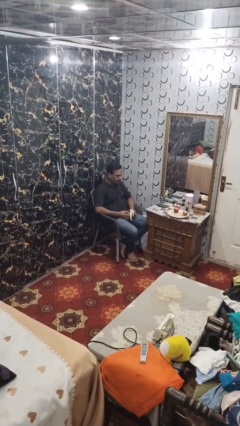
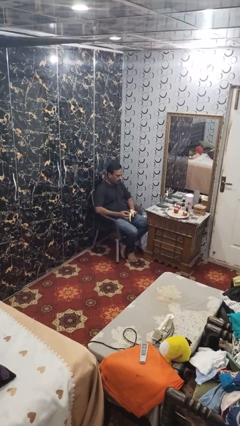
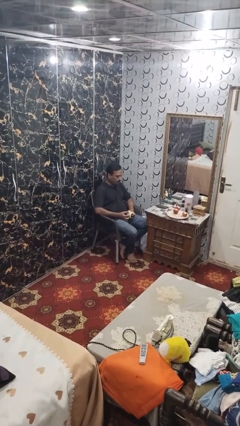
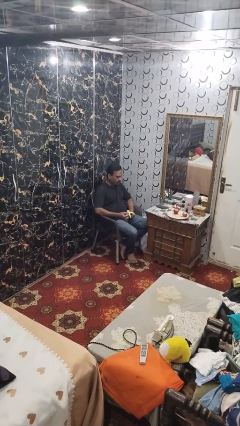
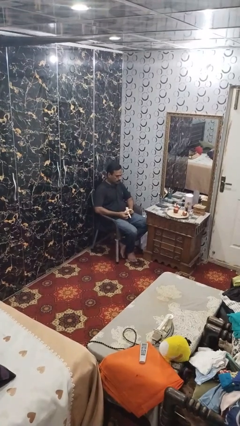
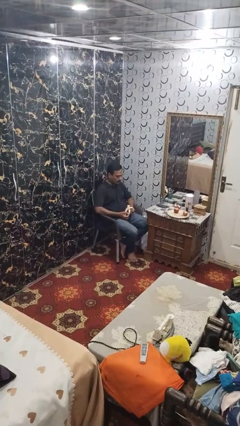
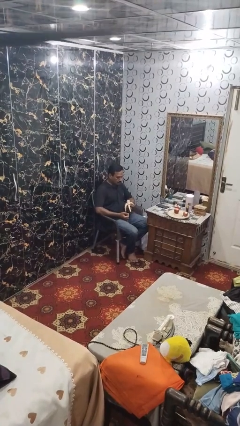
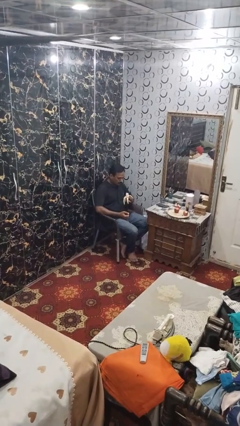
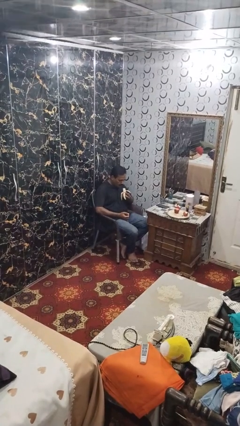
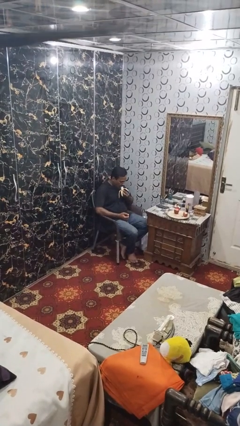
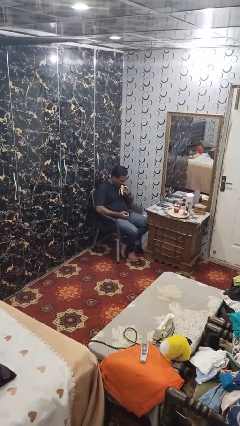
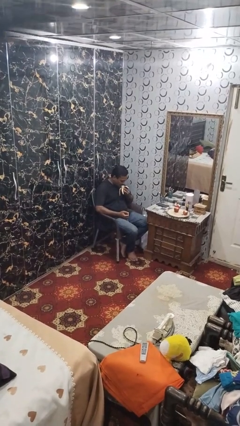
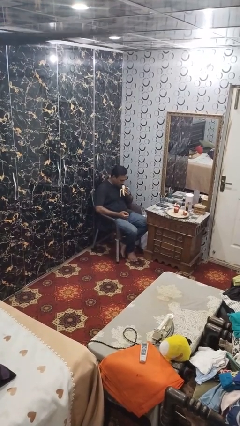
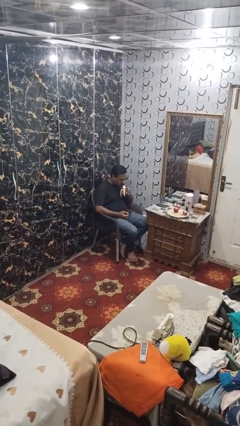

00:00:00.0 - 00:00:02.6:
person eats banana

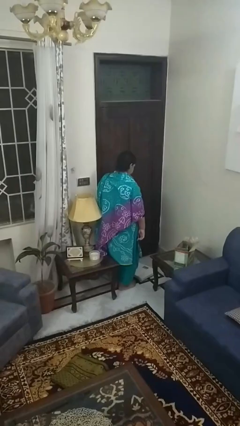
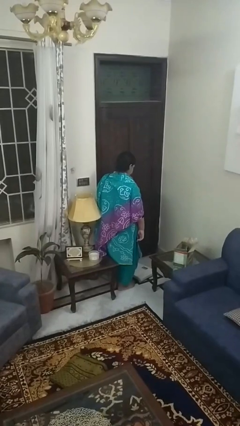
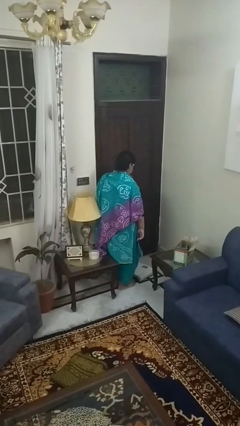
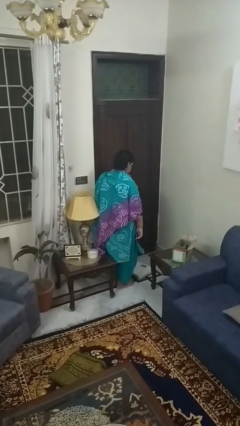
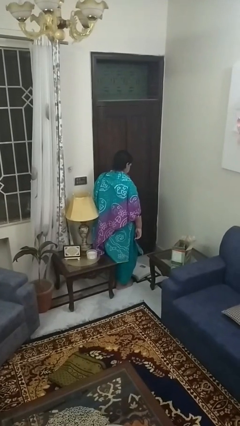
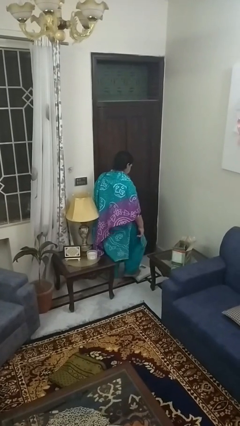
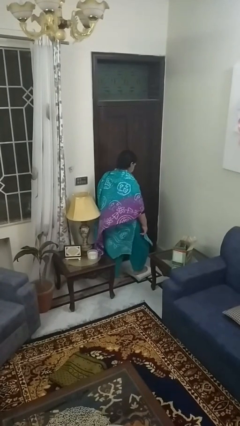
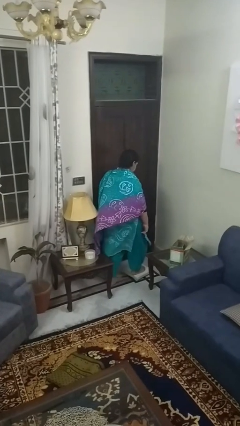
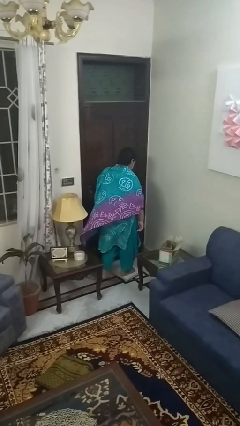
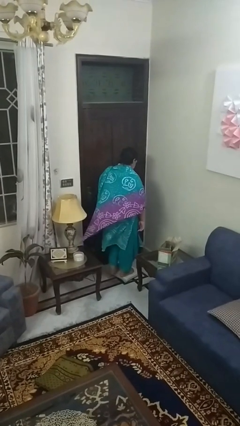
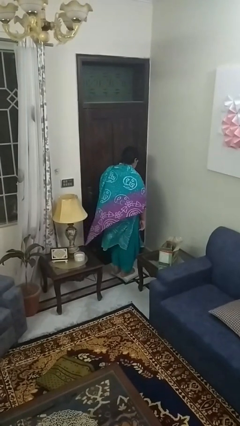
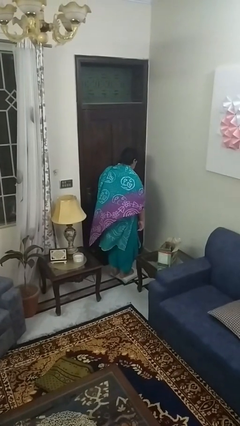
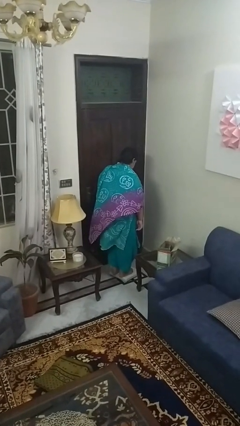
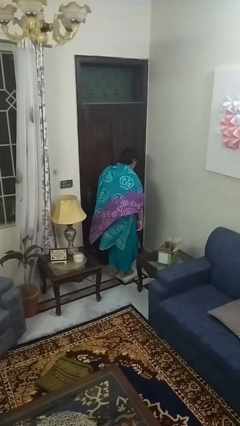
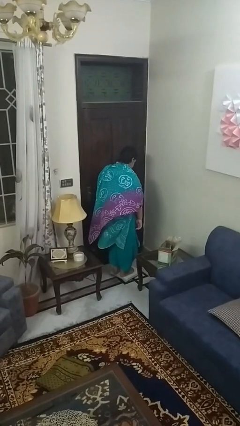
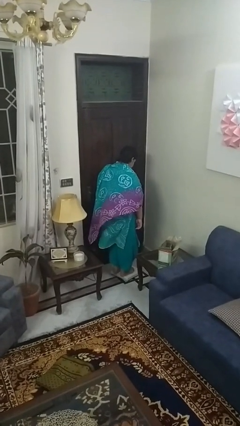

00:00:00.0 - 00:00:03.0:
person uses bodyweight scale

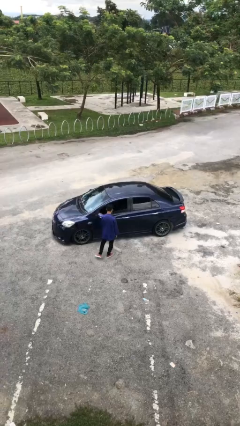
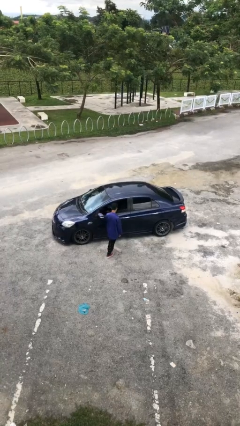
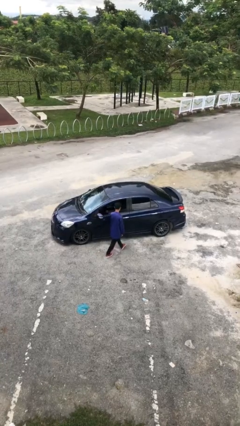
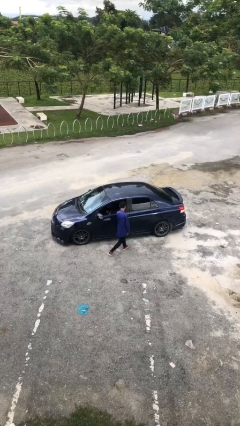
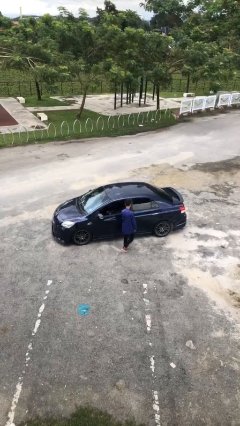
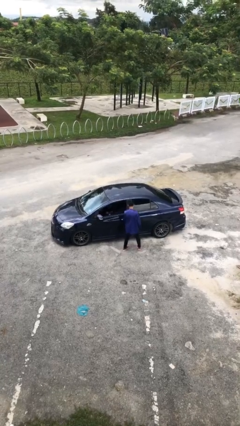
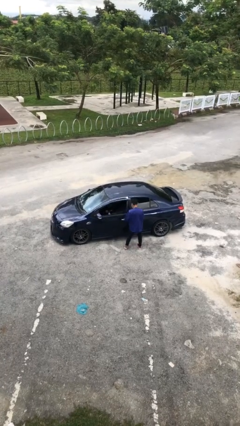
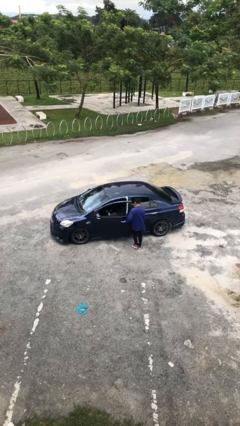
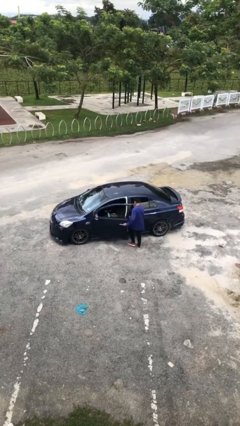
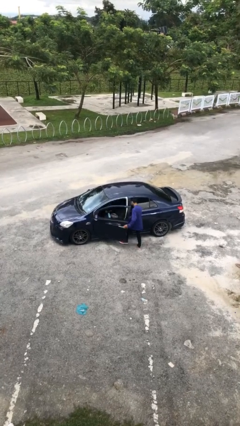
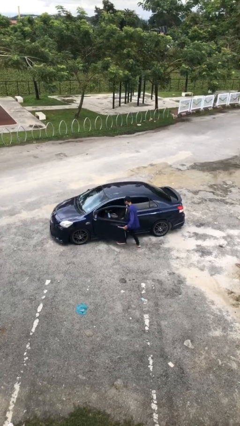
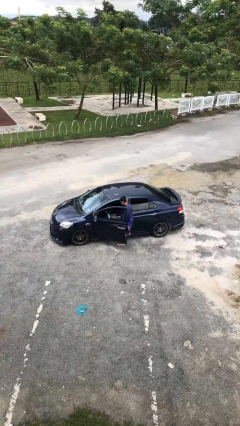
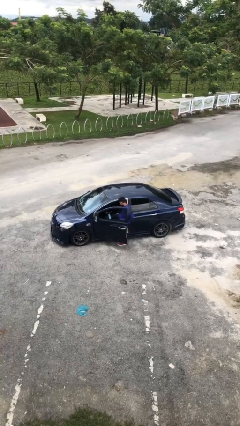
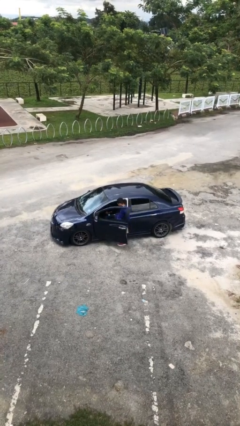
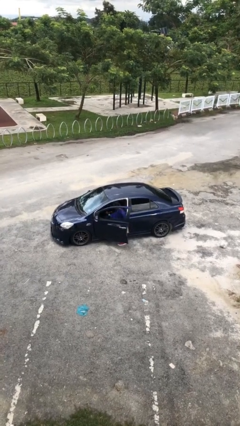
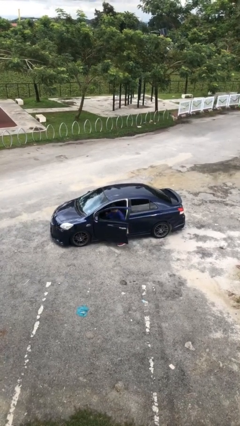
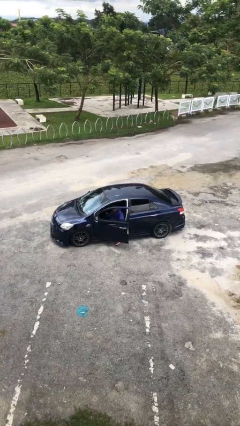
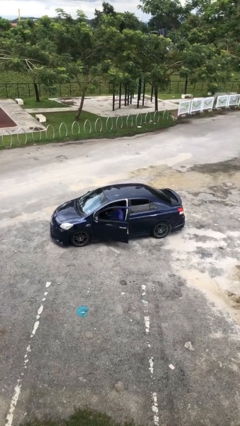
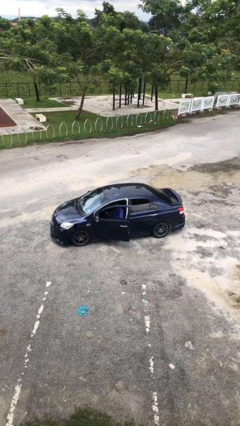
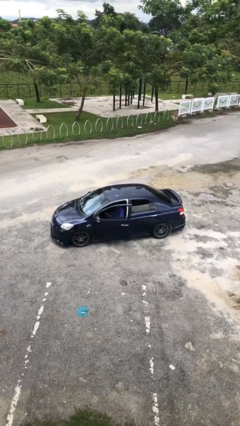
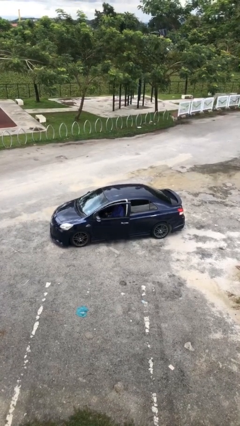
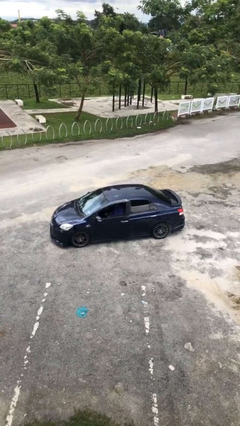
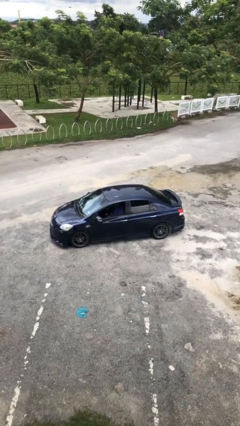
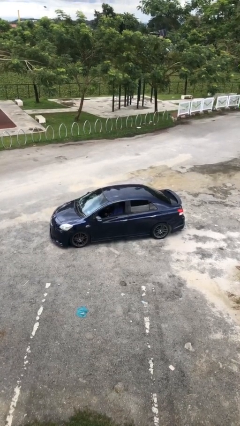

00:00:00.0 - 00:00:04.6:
car picks up person

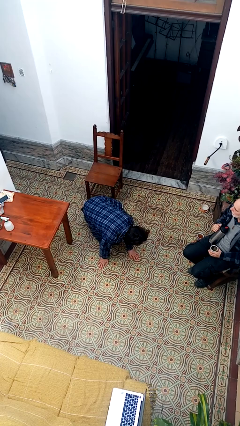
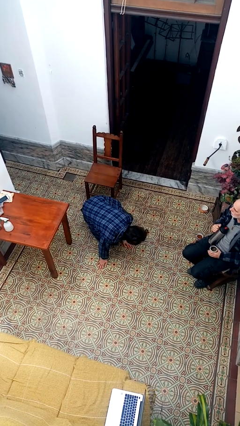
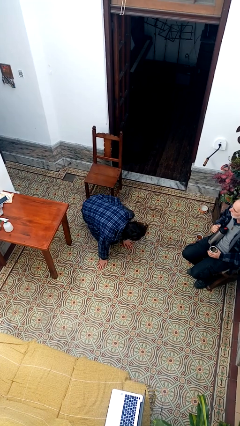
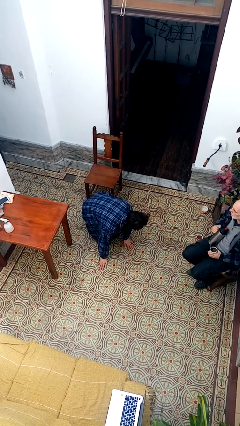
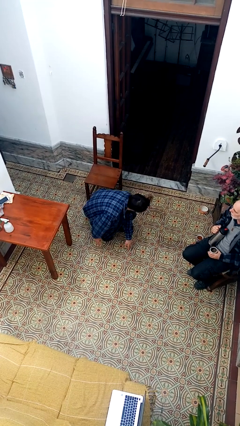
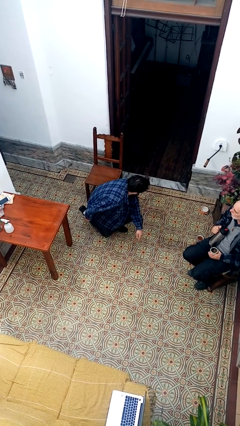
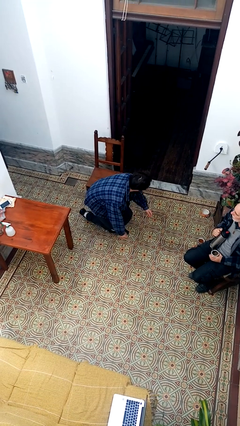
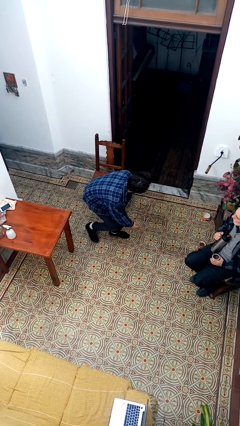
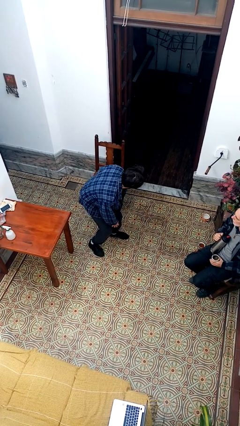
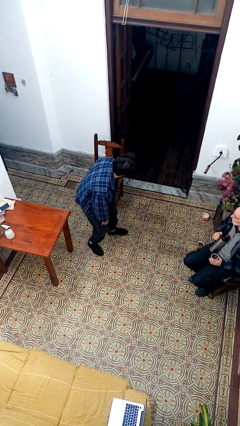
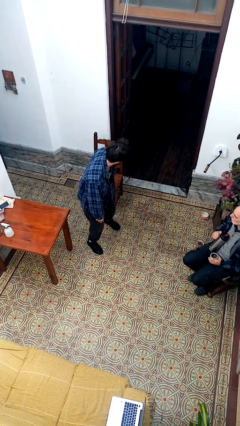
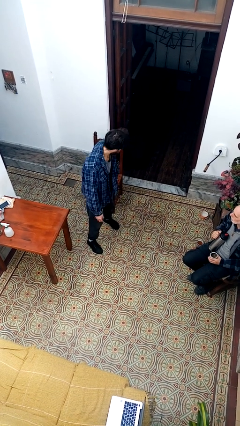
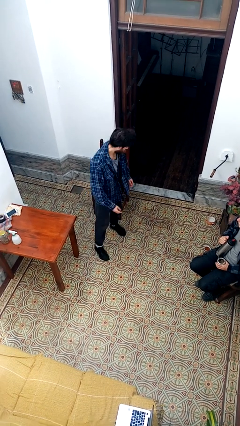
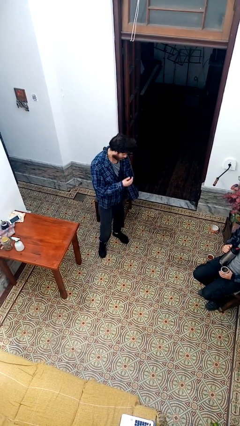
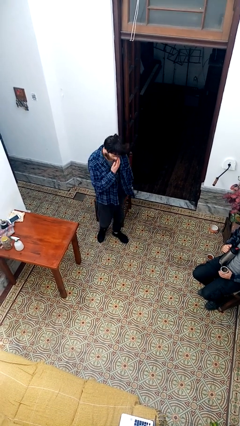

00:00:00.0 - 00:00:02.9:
person stands up from floor

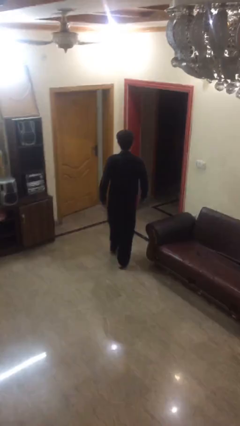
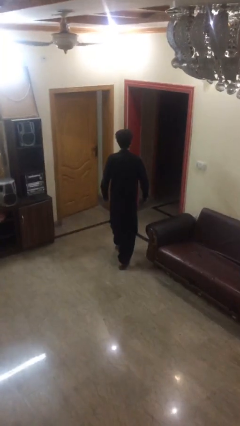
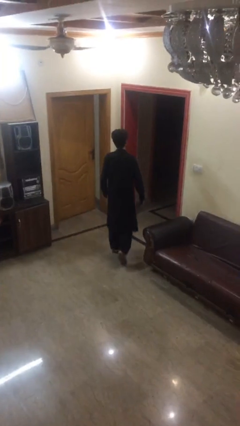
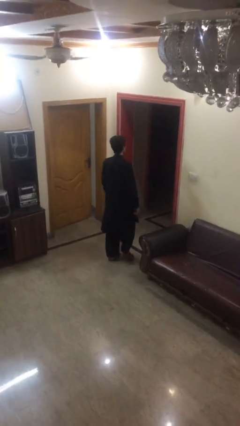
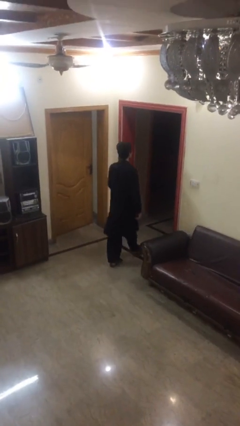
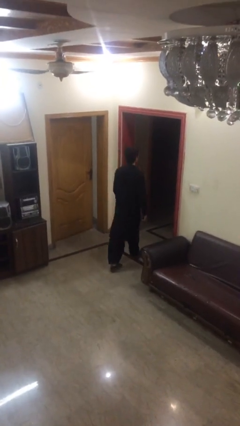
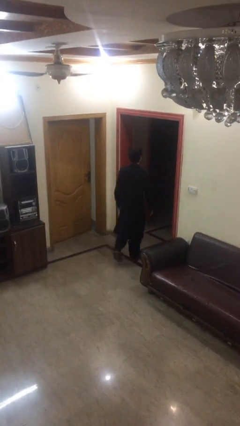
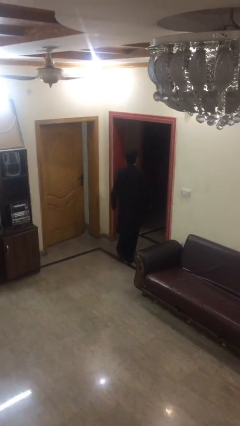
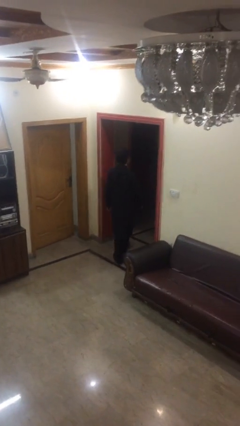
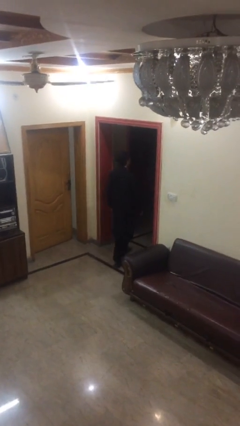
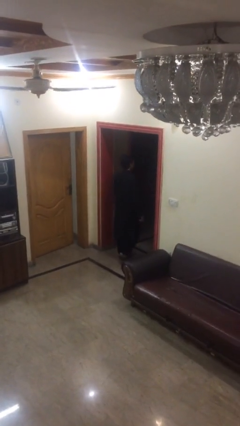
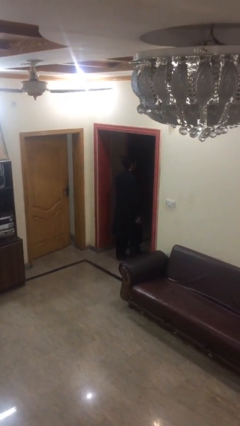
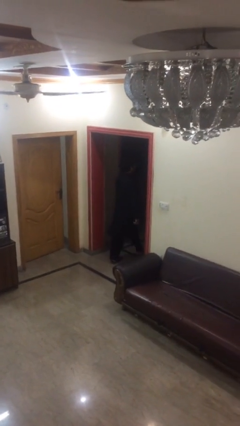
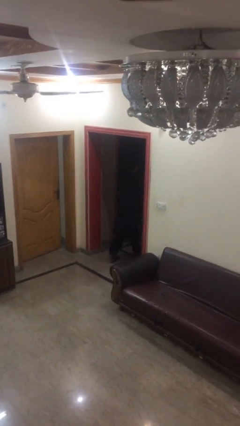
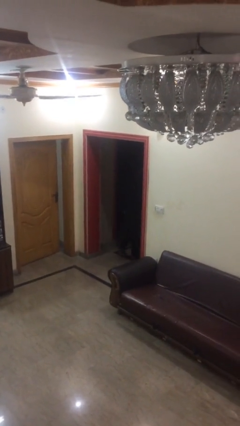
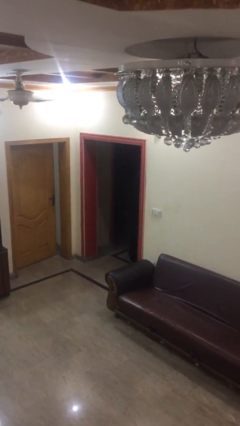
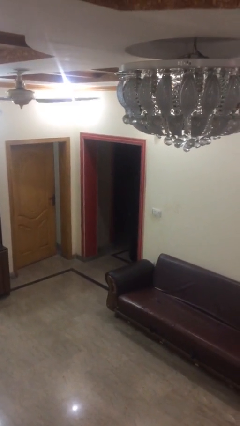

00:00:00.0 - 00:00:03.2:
person exits scene through structure

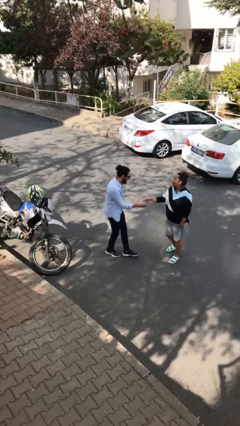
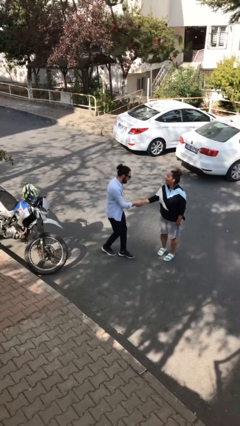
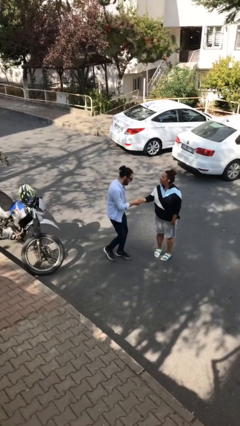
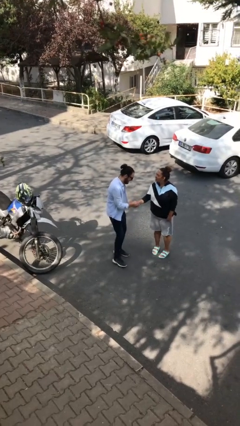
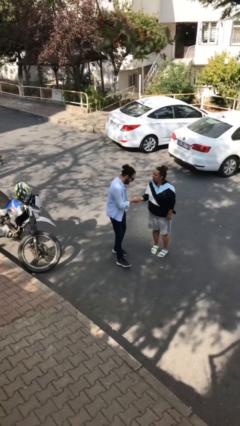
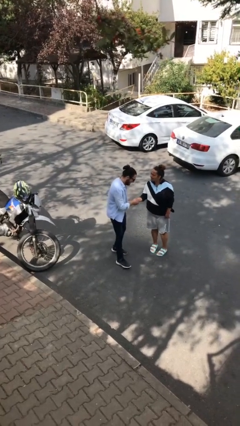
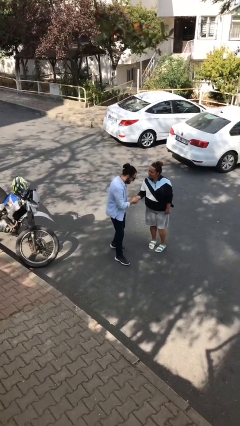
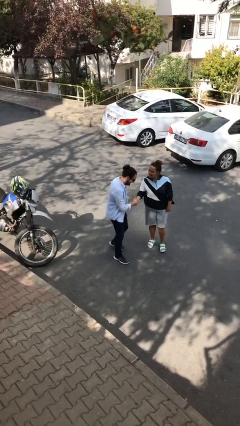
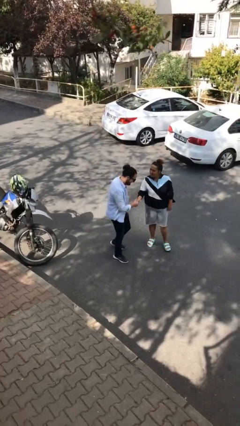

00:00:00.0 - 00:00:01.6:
person shakes hand
